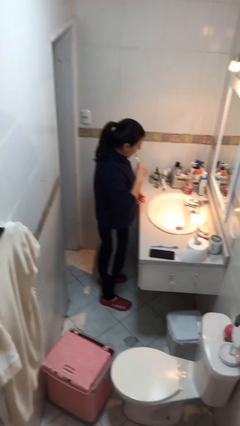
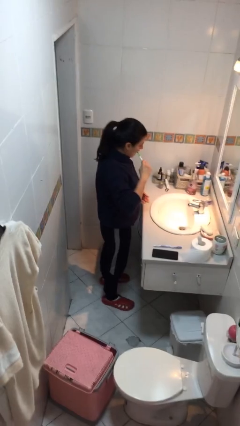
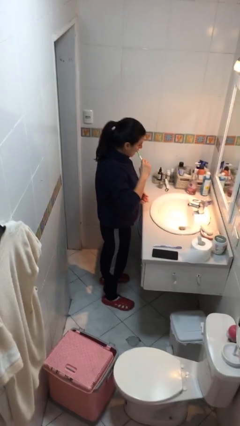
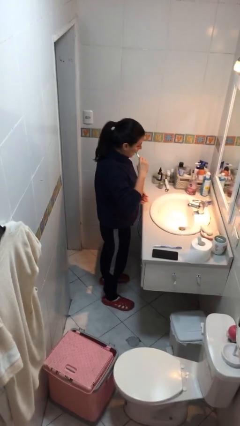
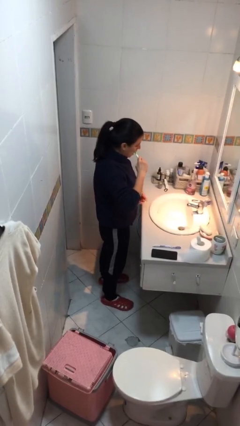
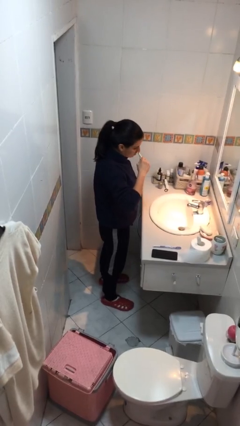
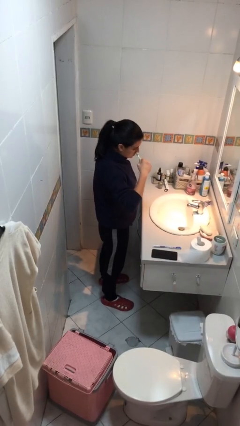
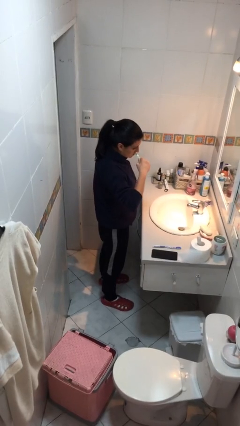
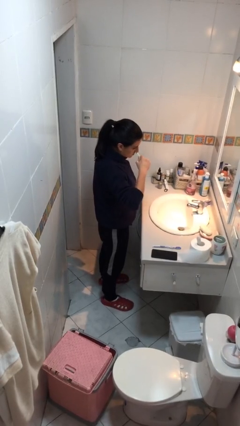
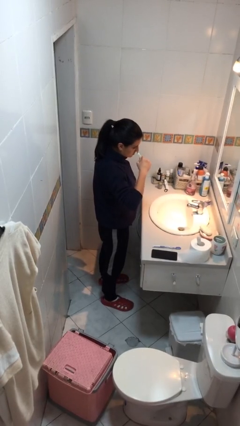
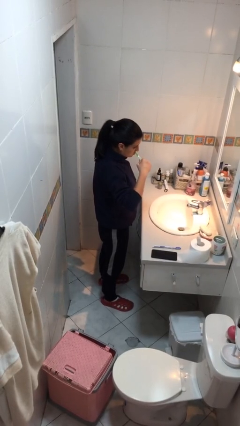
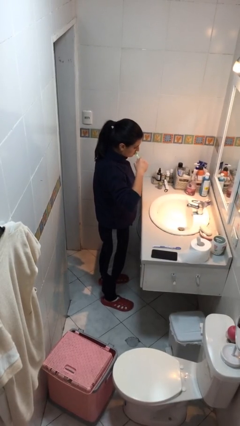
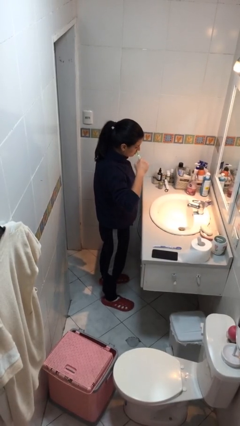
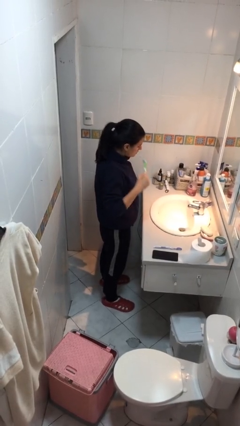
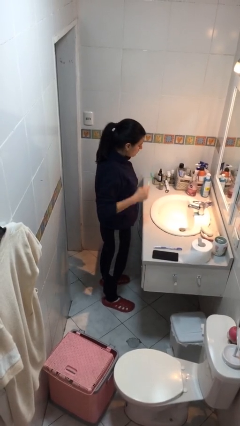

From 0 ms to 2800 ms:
person brushes teeth

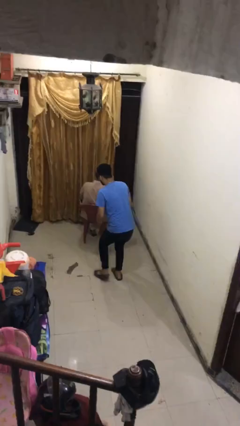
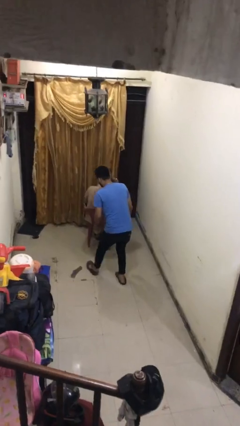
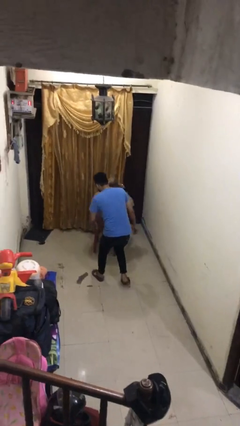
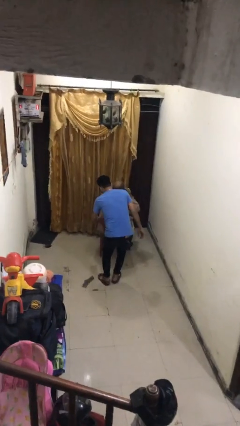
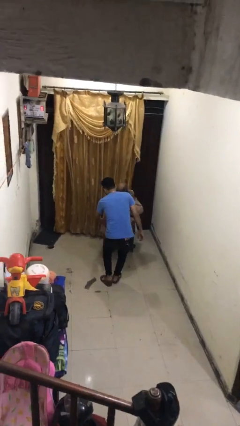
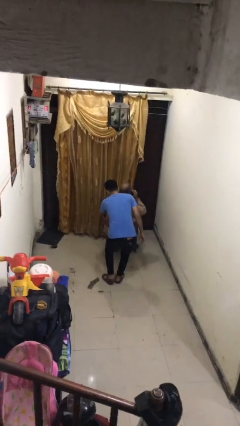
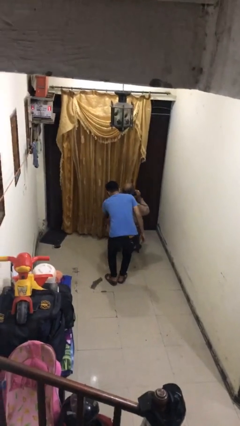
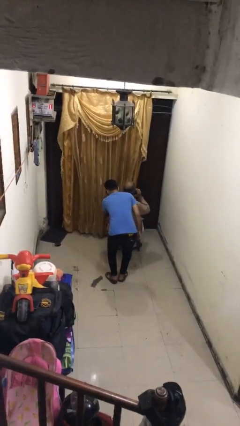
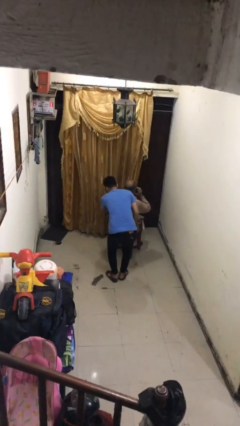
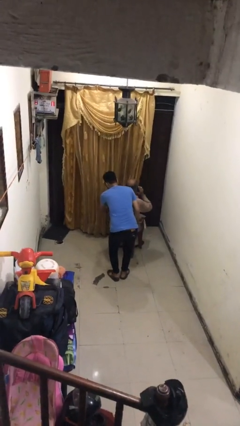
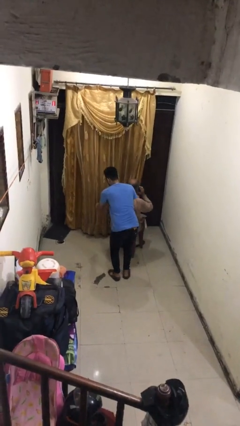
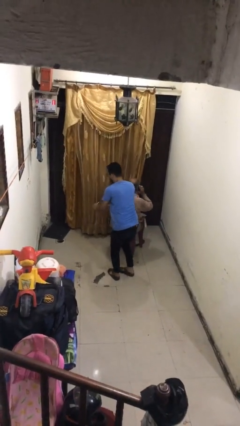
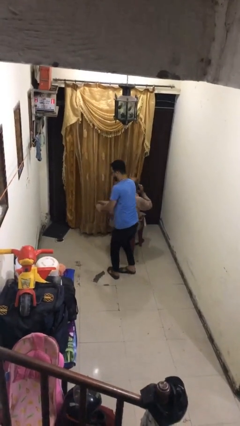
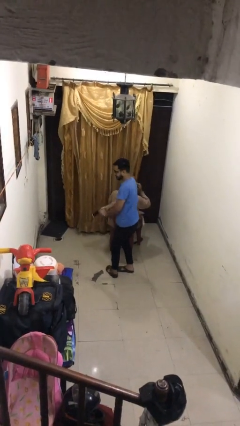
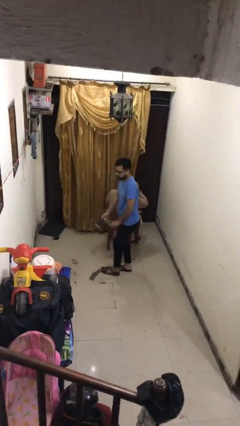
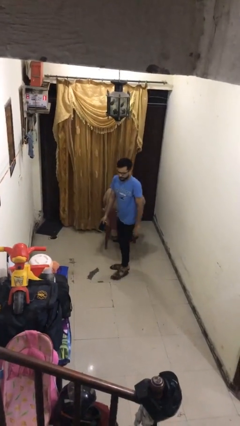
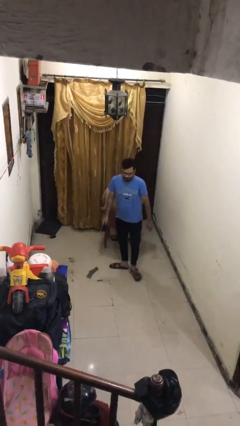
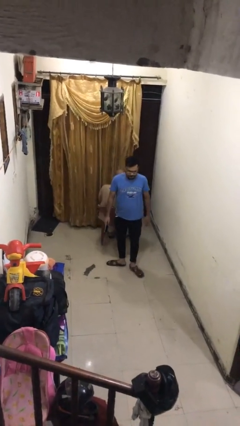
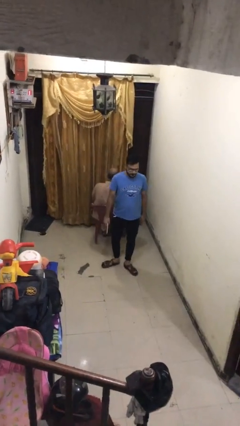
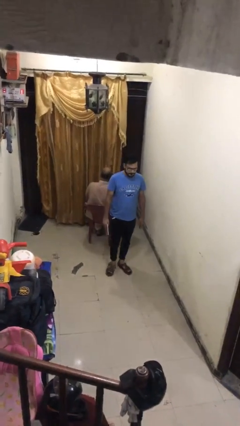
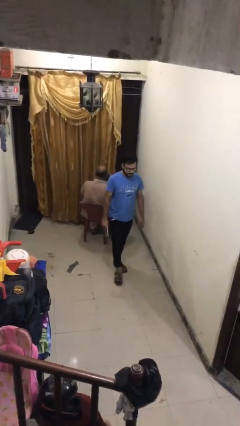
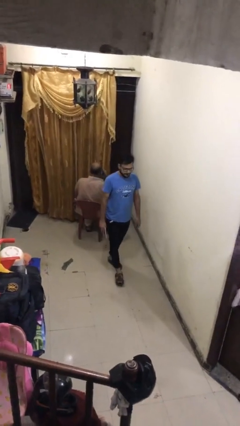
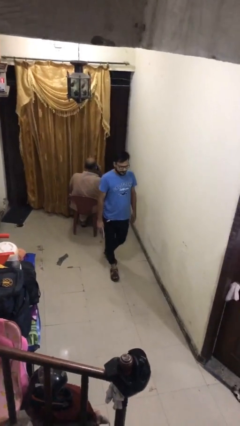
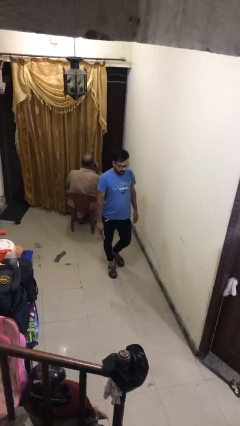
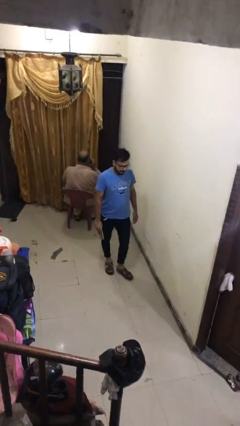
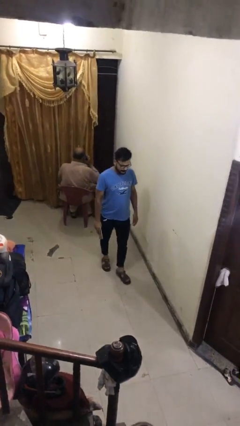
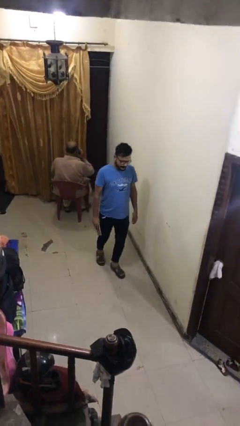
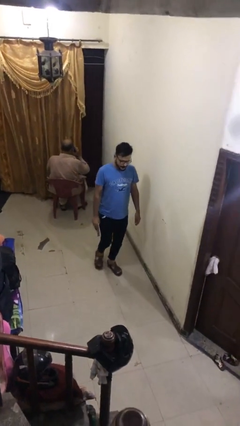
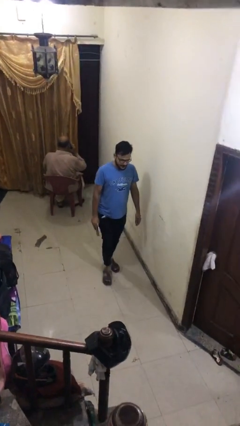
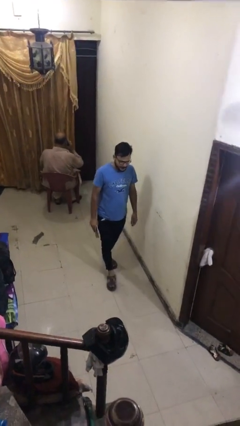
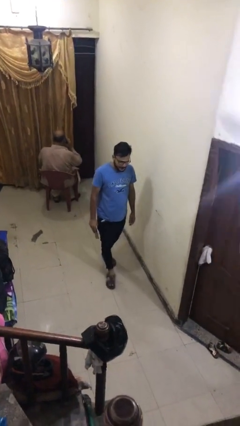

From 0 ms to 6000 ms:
person steals object from person

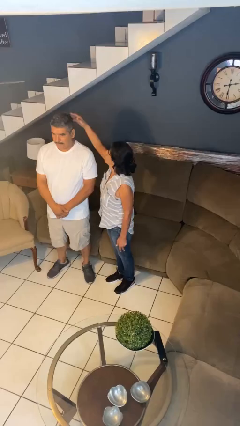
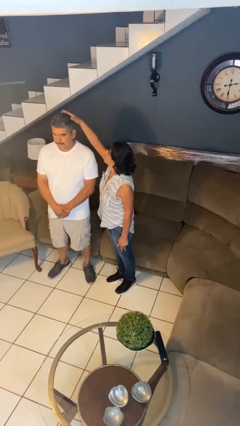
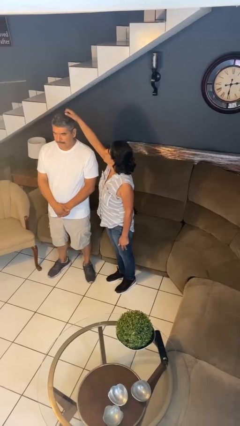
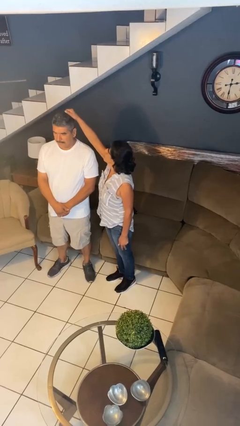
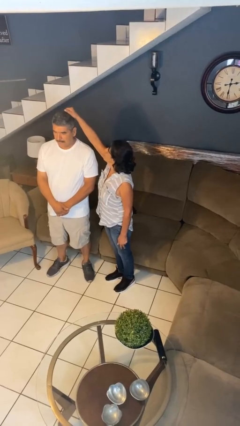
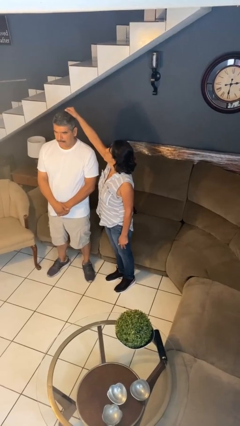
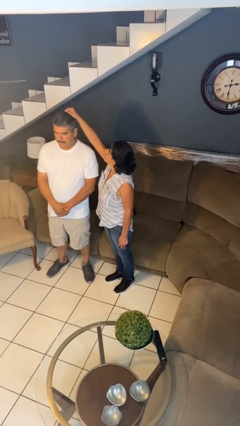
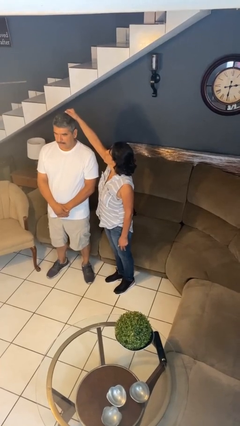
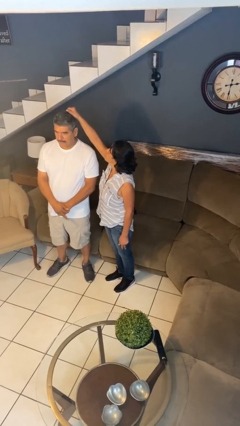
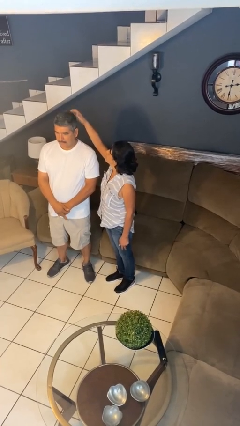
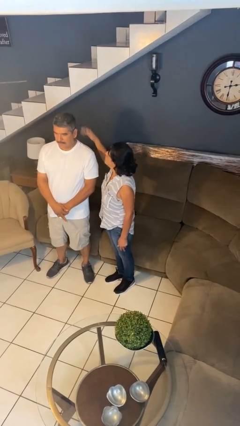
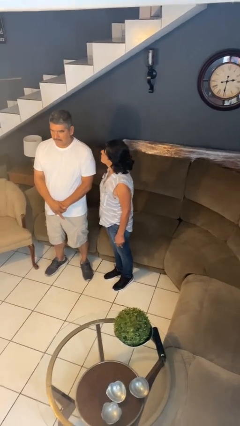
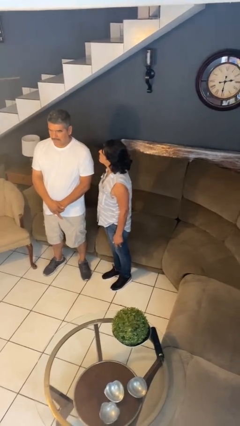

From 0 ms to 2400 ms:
person grabs person by hair

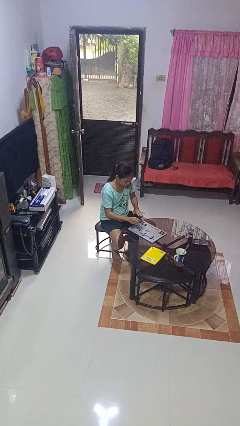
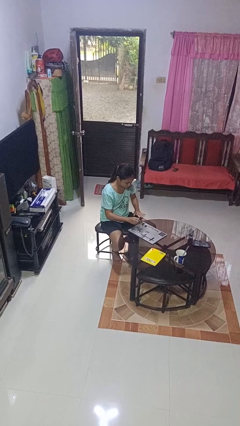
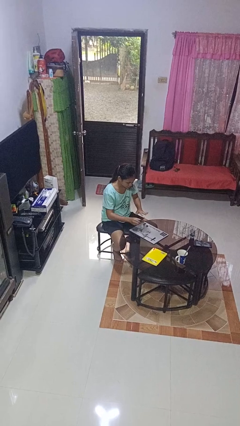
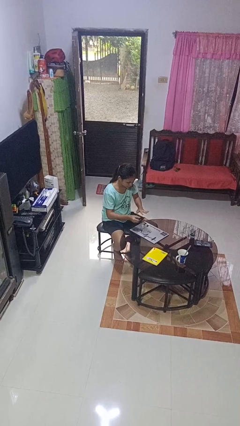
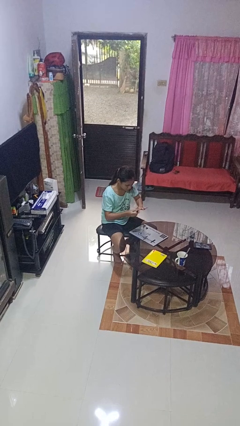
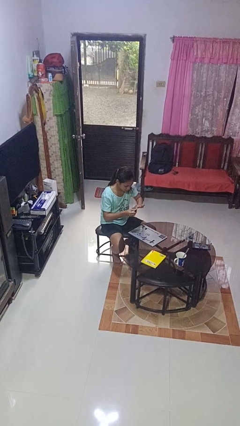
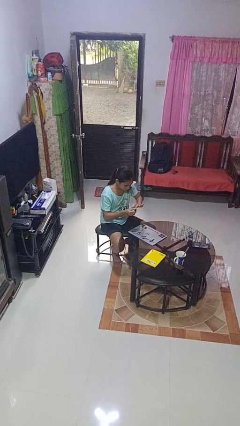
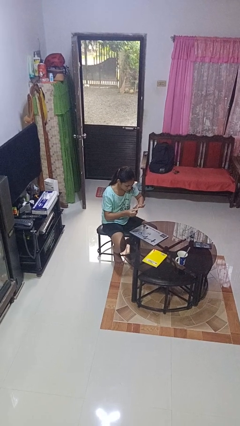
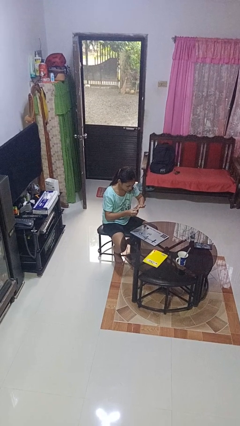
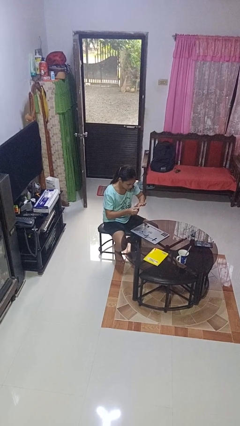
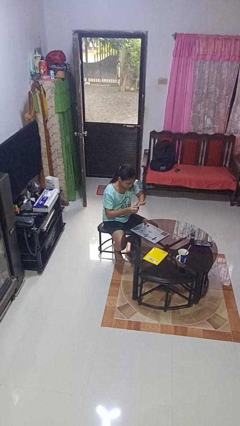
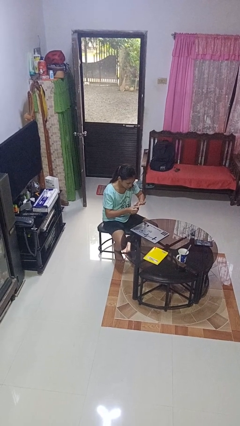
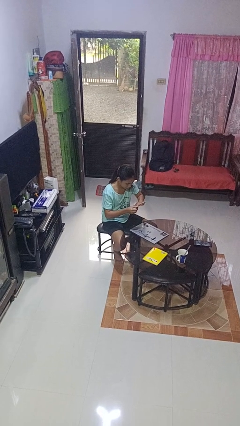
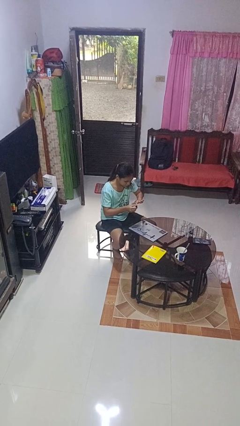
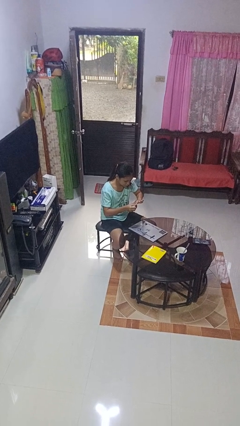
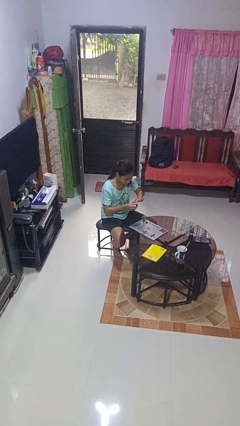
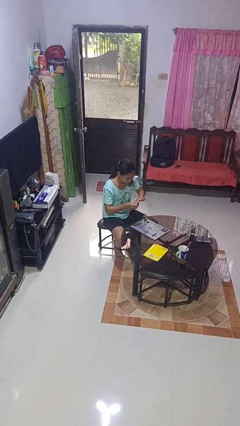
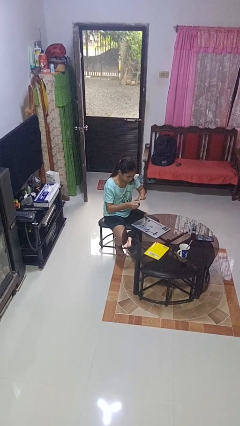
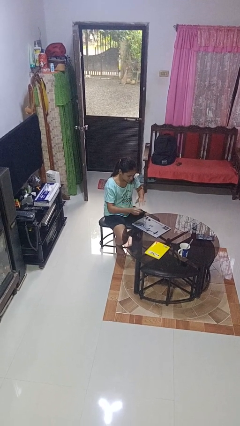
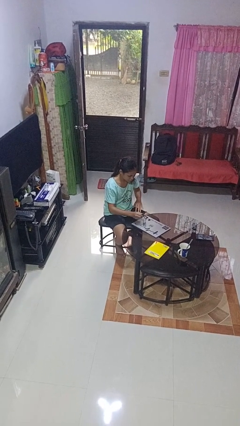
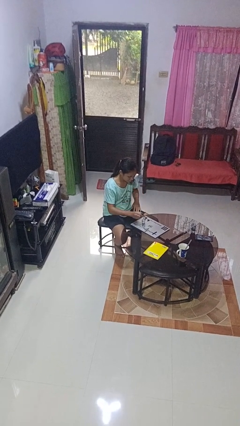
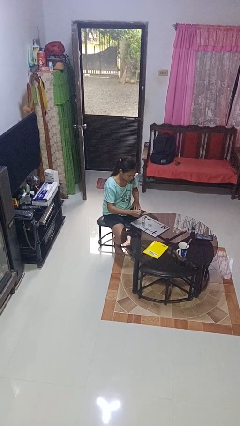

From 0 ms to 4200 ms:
person paints fingernails

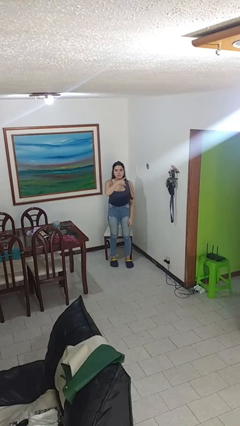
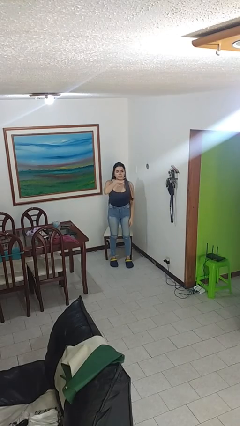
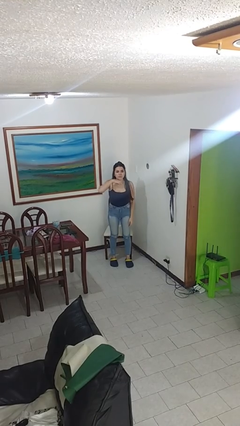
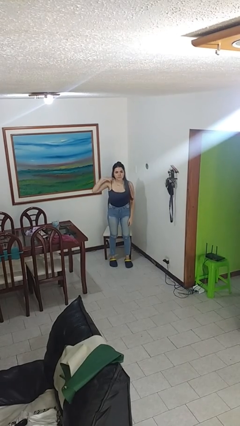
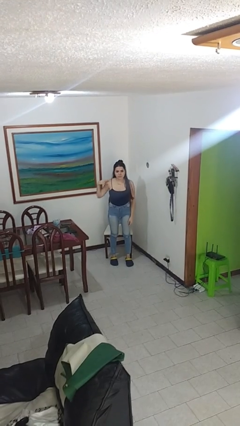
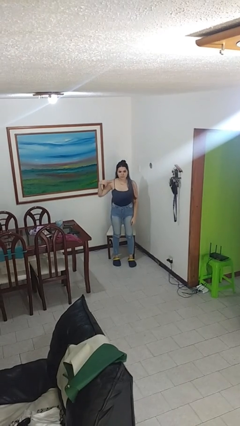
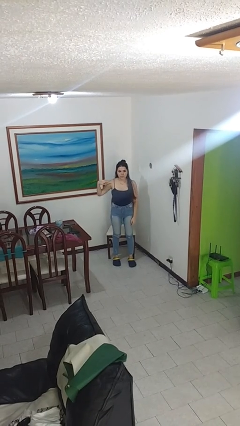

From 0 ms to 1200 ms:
person gestures cut

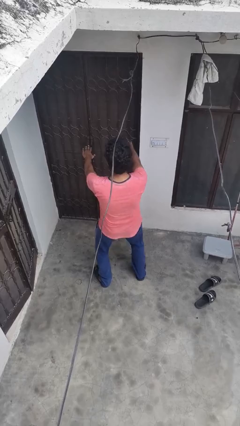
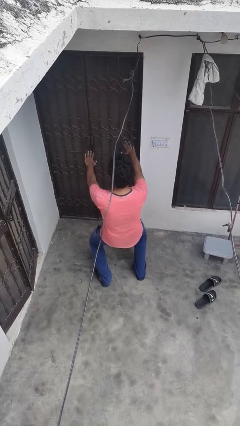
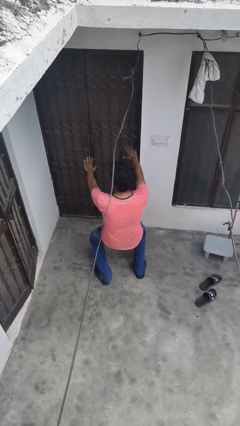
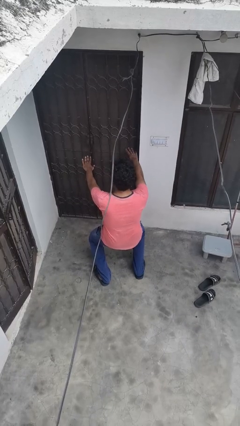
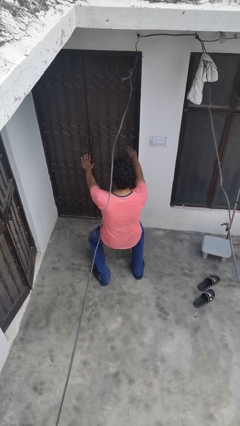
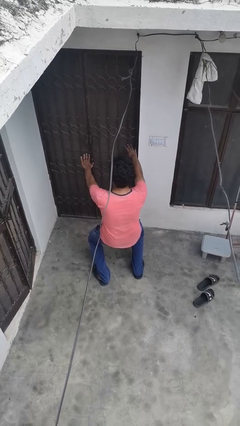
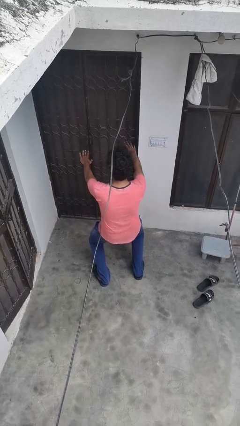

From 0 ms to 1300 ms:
person squats
